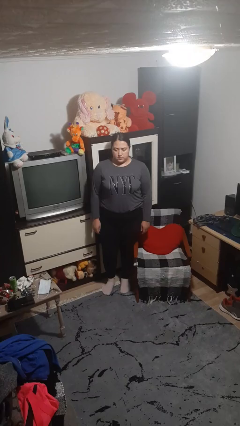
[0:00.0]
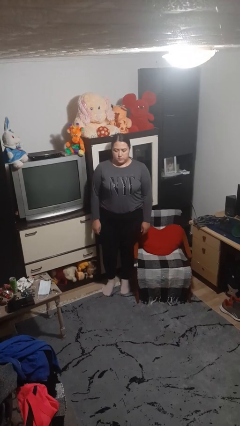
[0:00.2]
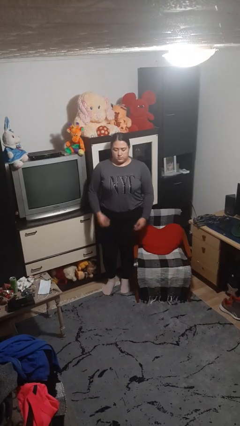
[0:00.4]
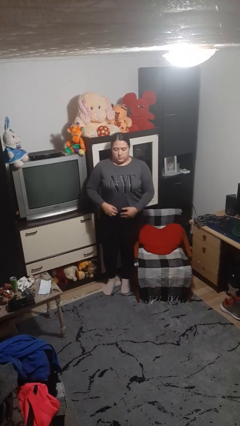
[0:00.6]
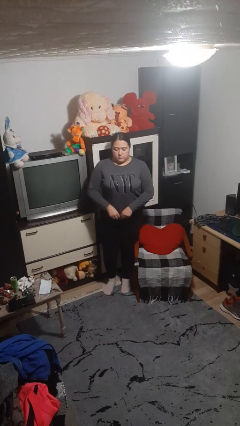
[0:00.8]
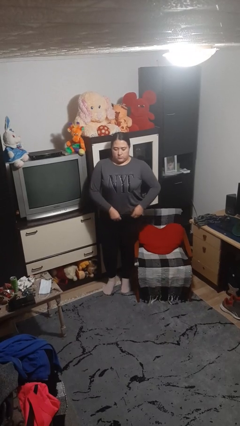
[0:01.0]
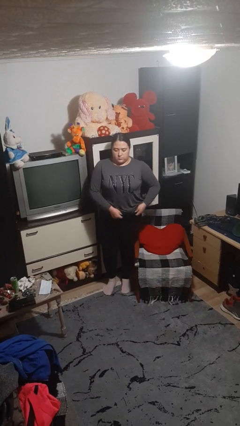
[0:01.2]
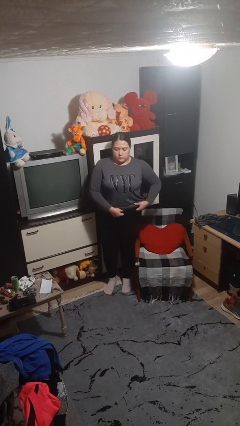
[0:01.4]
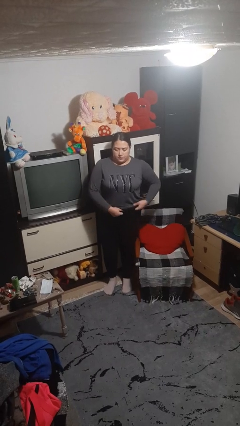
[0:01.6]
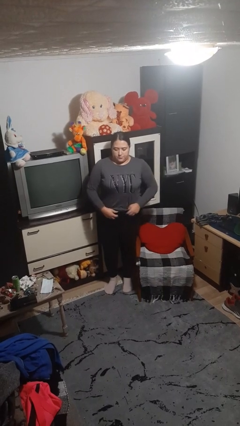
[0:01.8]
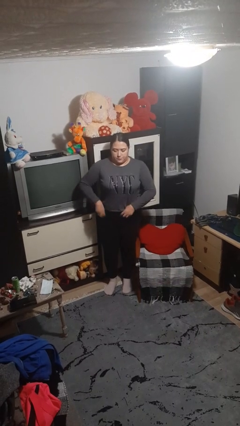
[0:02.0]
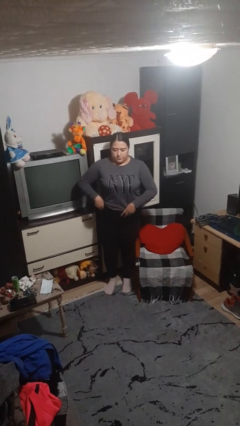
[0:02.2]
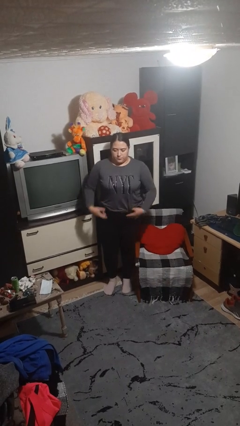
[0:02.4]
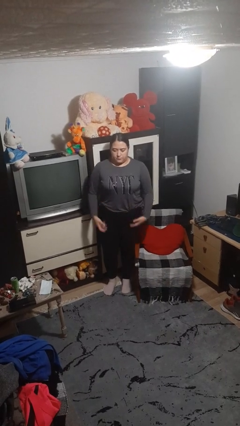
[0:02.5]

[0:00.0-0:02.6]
person hikes up pants

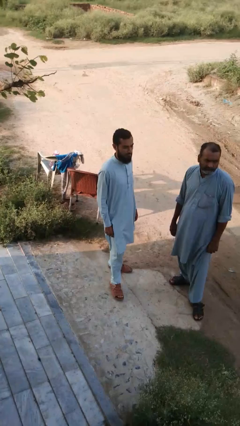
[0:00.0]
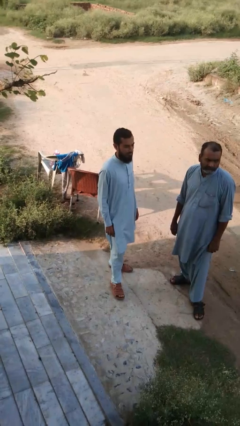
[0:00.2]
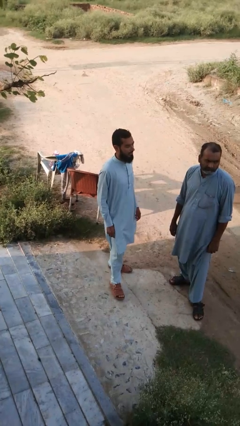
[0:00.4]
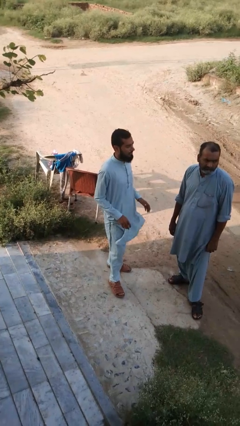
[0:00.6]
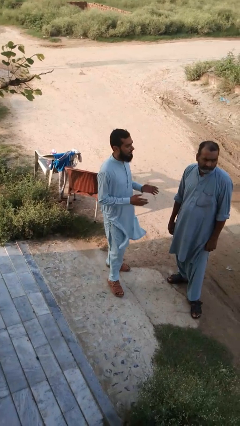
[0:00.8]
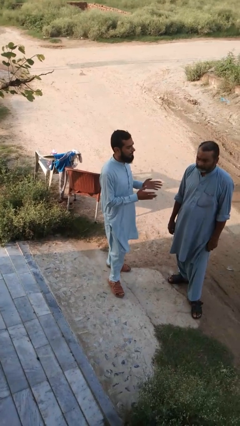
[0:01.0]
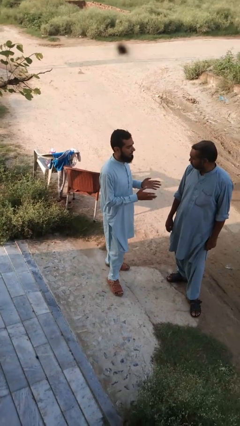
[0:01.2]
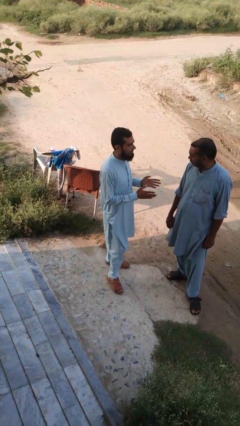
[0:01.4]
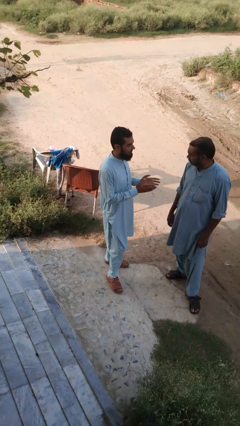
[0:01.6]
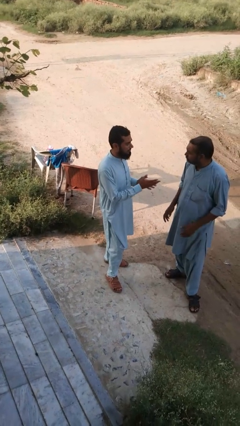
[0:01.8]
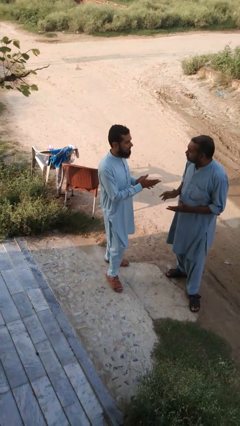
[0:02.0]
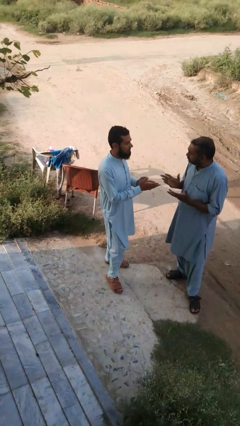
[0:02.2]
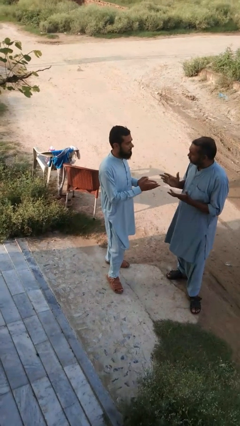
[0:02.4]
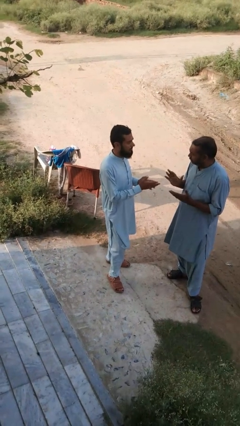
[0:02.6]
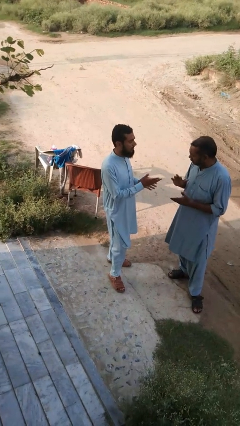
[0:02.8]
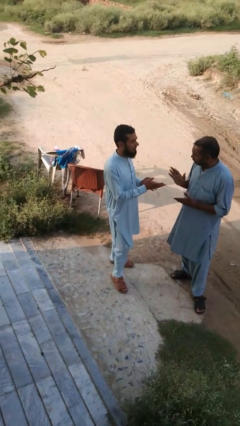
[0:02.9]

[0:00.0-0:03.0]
person talks to person

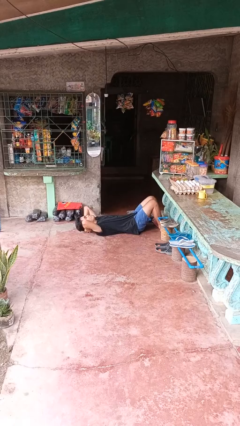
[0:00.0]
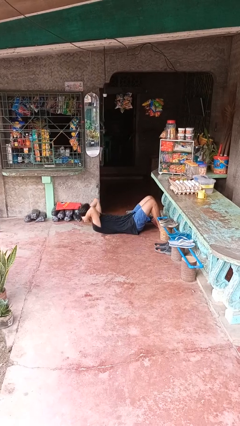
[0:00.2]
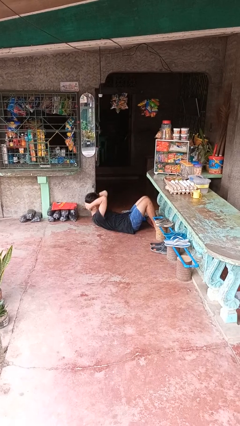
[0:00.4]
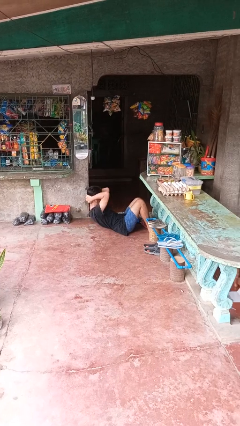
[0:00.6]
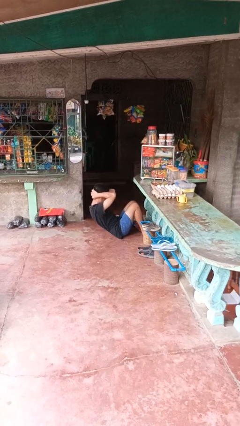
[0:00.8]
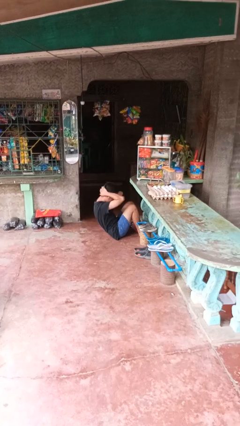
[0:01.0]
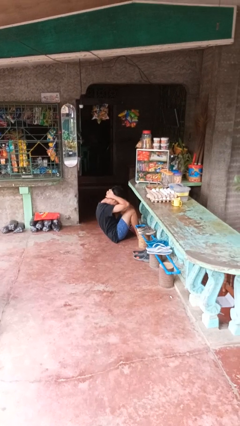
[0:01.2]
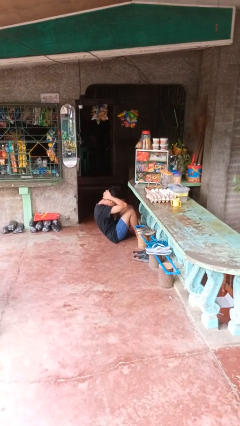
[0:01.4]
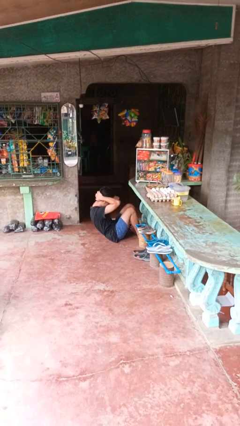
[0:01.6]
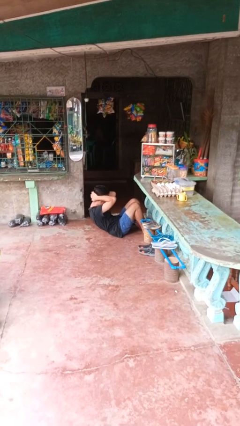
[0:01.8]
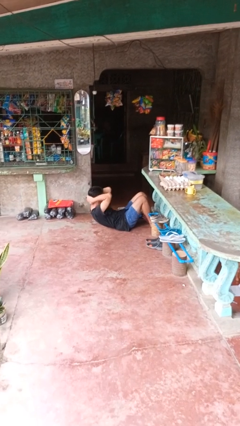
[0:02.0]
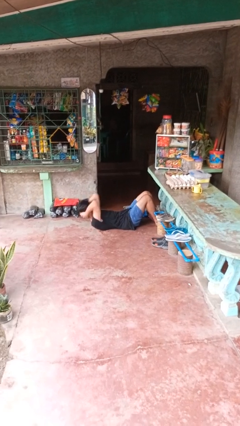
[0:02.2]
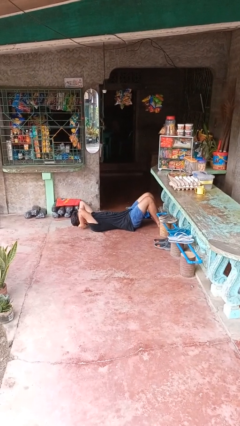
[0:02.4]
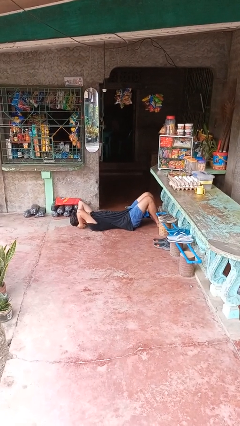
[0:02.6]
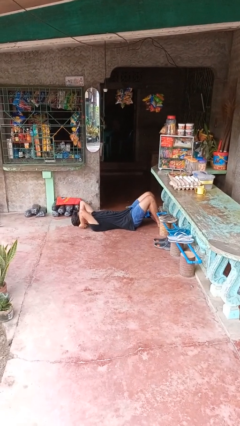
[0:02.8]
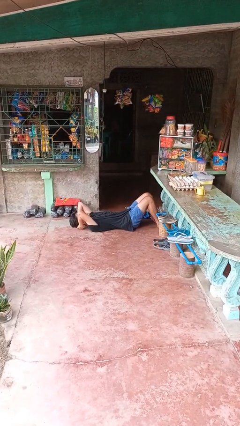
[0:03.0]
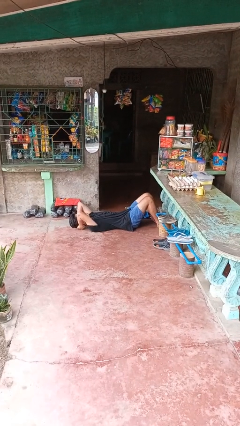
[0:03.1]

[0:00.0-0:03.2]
person exercises with situp

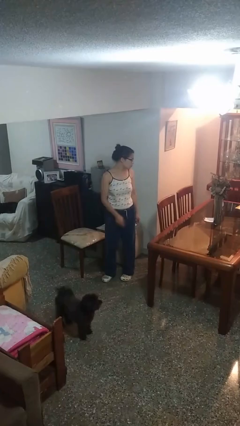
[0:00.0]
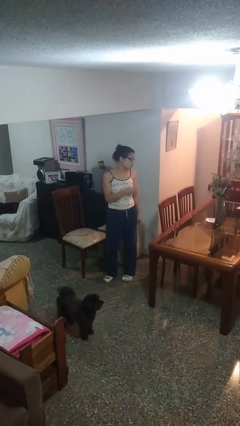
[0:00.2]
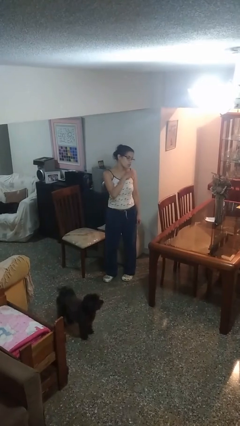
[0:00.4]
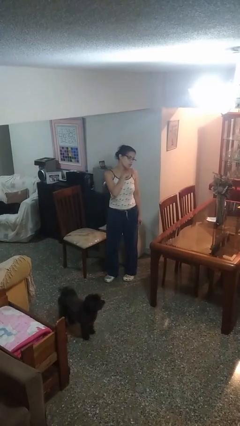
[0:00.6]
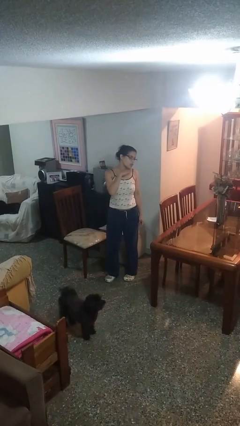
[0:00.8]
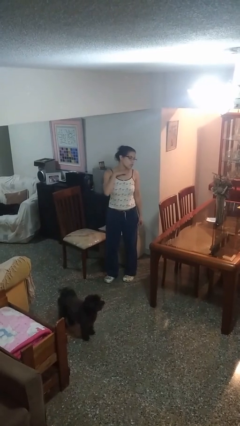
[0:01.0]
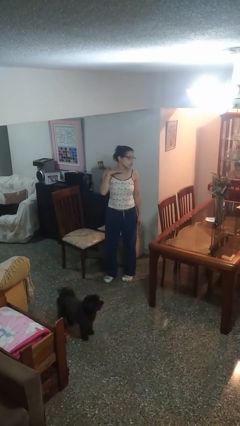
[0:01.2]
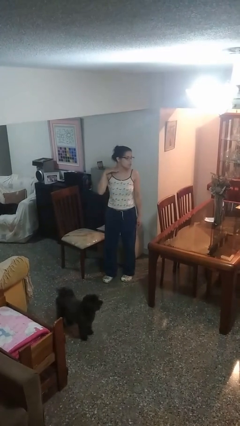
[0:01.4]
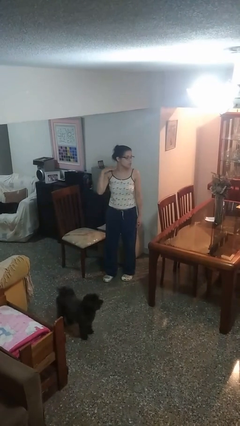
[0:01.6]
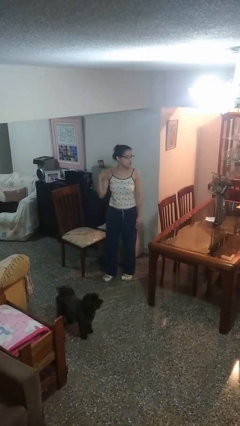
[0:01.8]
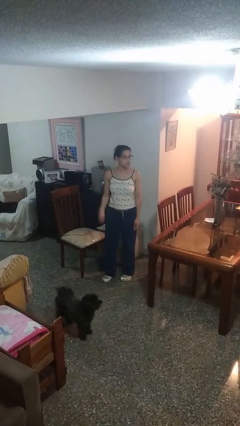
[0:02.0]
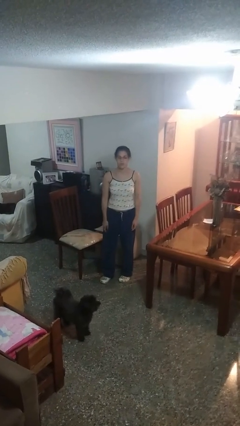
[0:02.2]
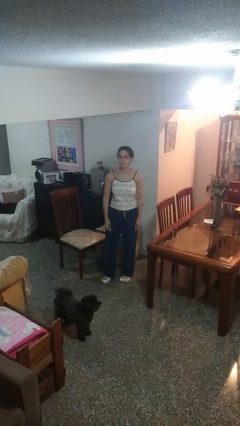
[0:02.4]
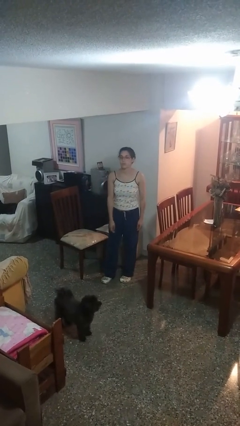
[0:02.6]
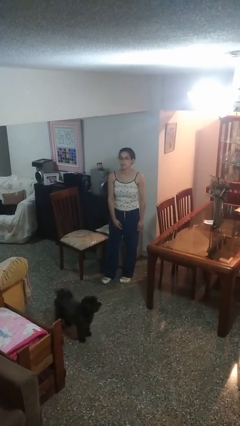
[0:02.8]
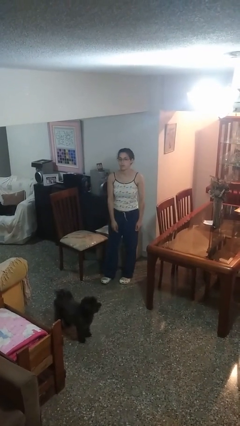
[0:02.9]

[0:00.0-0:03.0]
person gestures cut

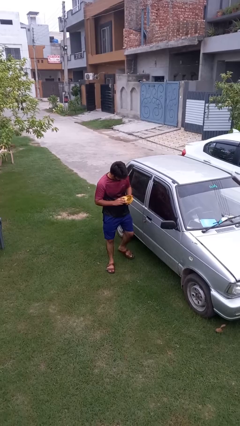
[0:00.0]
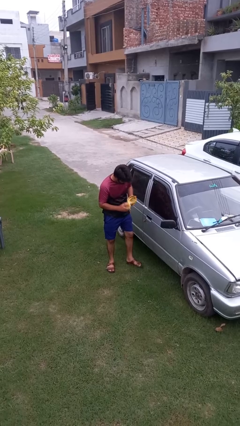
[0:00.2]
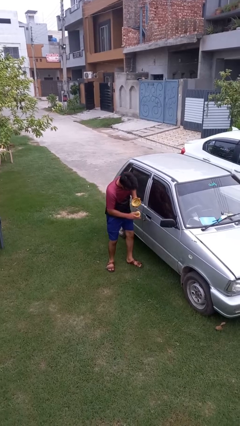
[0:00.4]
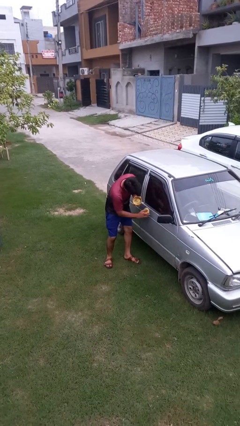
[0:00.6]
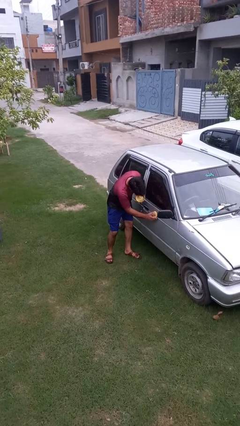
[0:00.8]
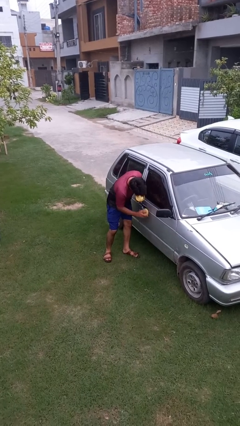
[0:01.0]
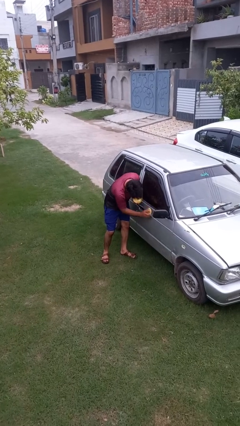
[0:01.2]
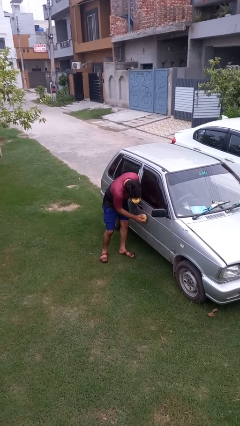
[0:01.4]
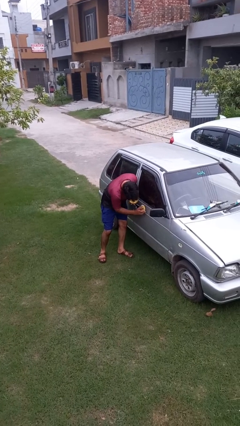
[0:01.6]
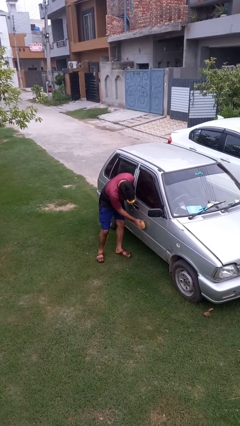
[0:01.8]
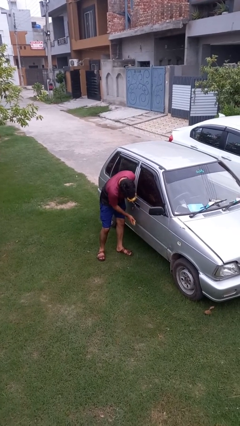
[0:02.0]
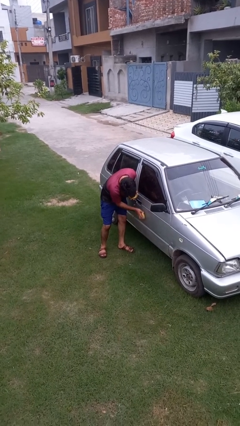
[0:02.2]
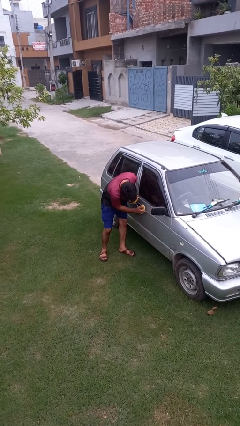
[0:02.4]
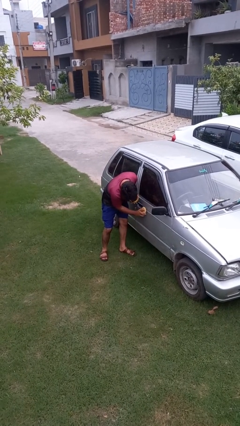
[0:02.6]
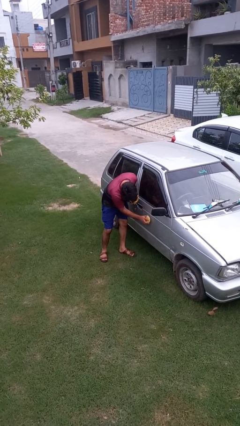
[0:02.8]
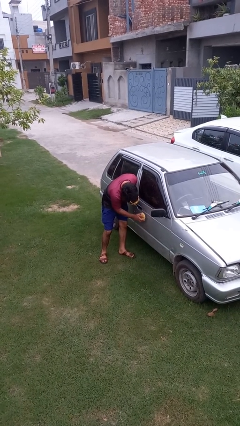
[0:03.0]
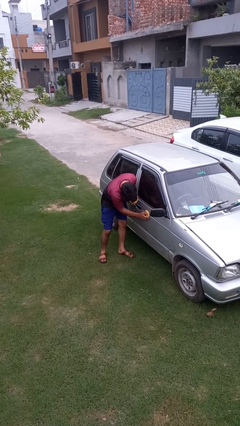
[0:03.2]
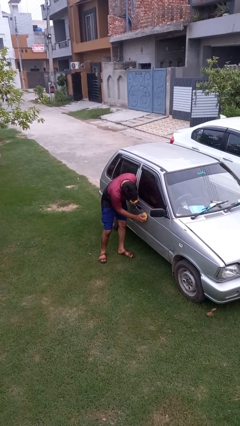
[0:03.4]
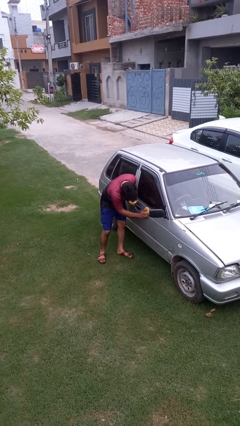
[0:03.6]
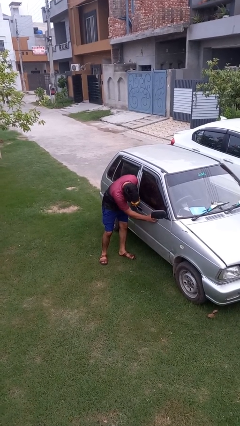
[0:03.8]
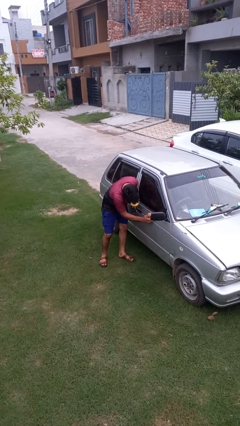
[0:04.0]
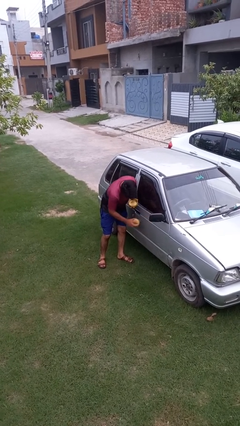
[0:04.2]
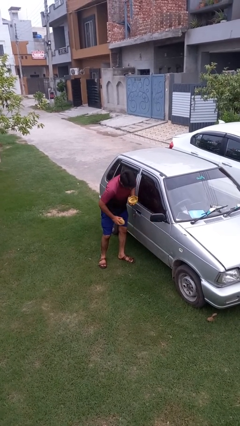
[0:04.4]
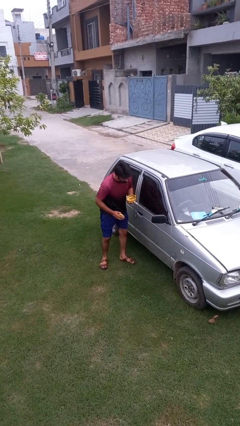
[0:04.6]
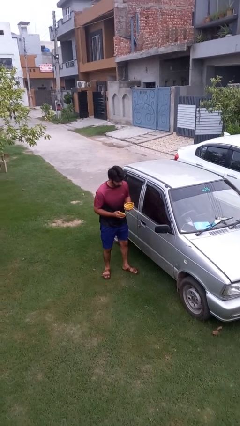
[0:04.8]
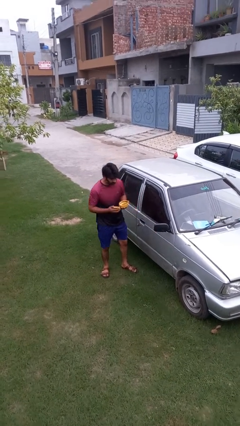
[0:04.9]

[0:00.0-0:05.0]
person polishes car with rag

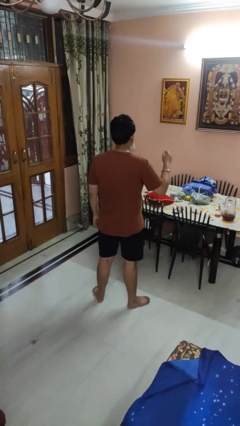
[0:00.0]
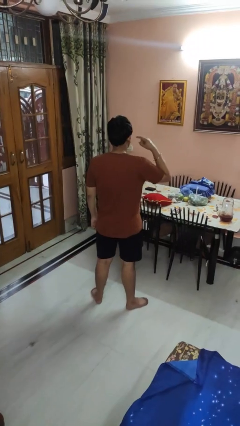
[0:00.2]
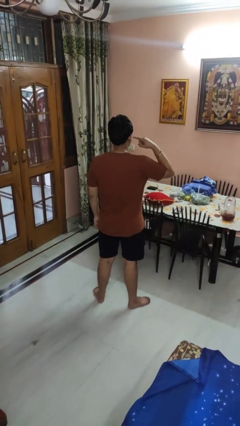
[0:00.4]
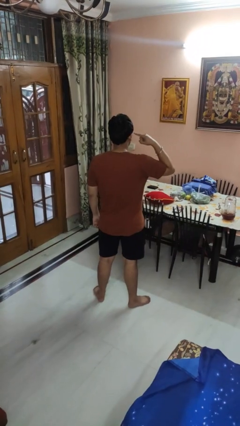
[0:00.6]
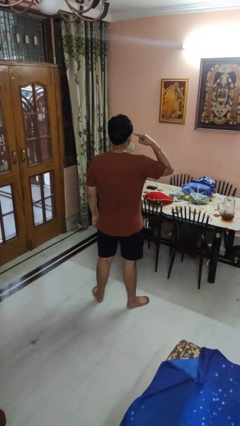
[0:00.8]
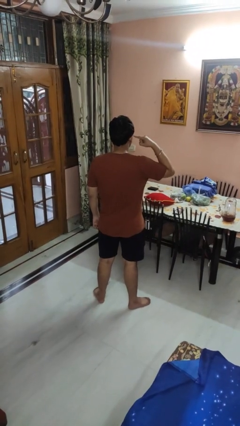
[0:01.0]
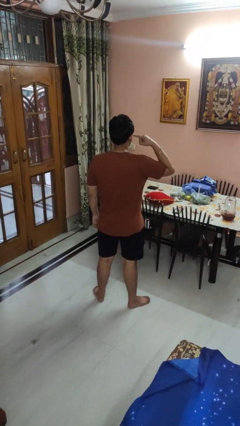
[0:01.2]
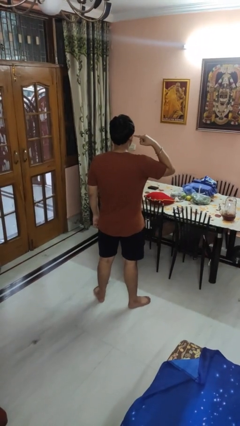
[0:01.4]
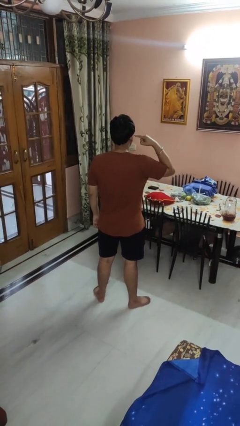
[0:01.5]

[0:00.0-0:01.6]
person gestures listen closely
